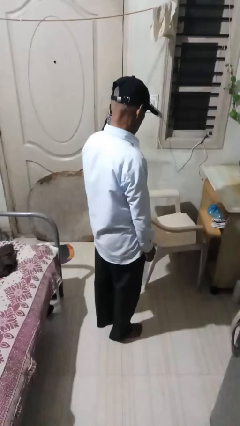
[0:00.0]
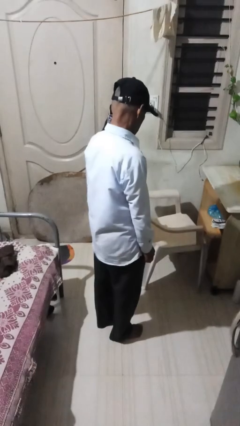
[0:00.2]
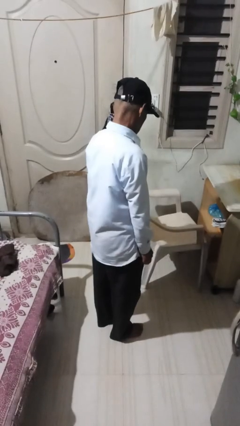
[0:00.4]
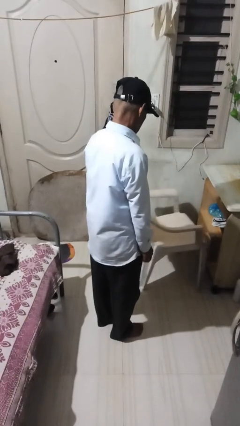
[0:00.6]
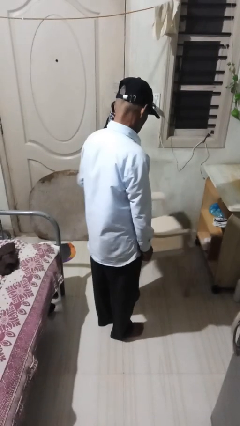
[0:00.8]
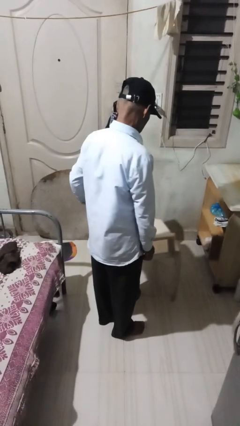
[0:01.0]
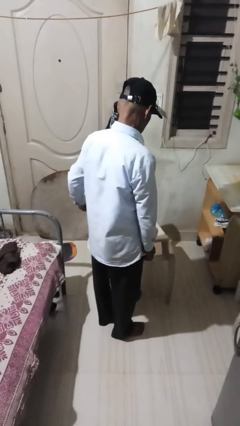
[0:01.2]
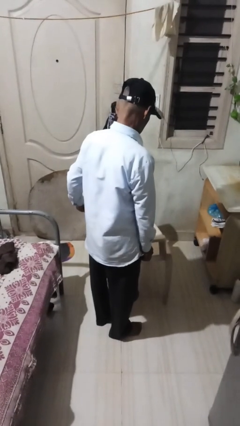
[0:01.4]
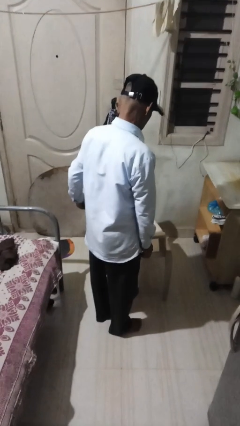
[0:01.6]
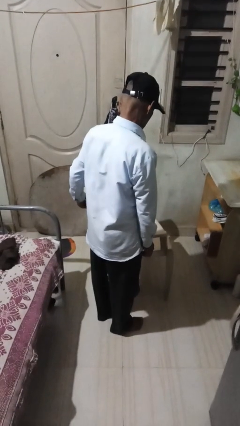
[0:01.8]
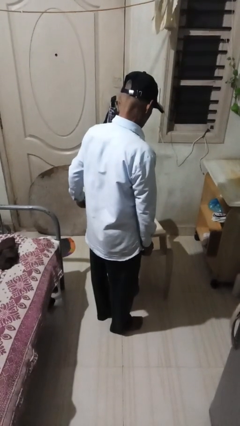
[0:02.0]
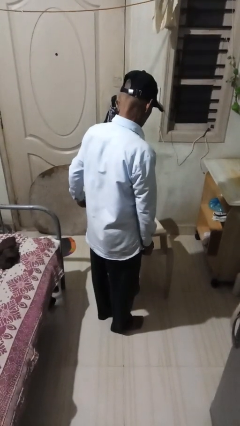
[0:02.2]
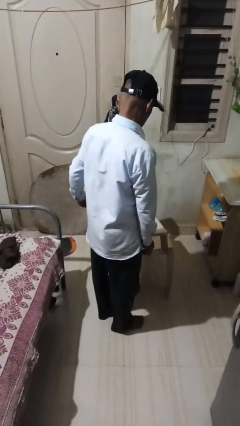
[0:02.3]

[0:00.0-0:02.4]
person pulls out chair

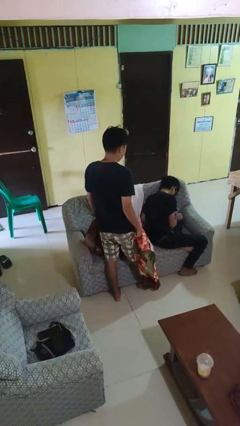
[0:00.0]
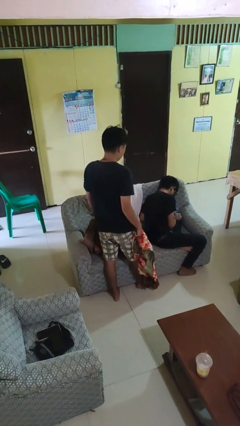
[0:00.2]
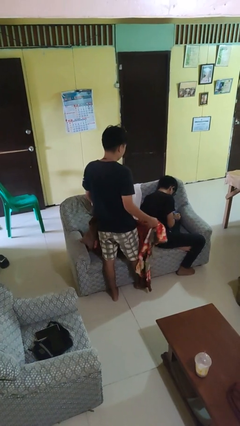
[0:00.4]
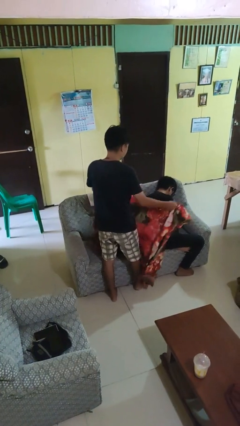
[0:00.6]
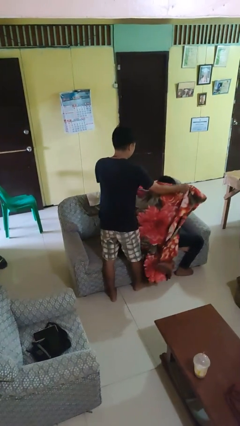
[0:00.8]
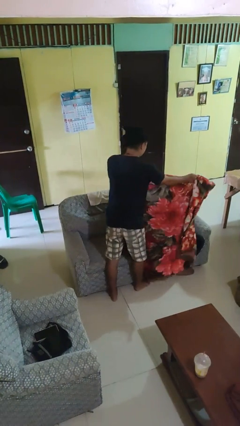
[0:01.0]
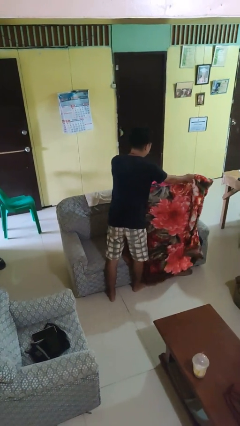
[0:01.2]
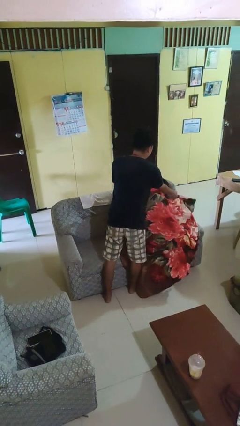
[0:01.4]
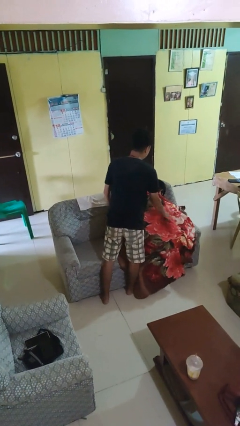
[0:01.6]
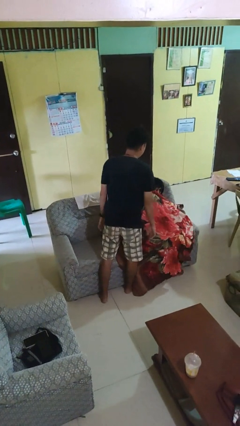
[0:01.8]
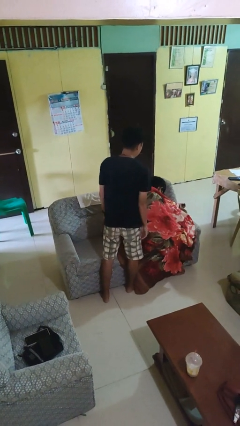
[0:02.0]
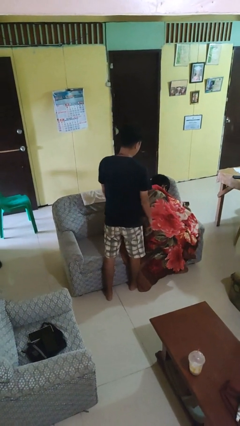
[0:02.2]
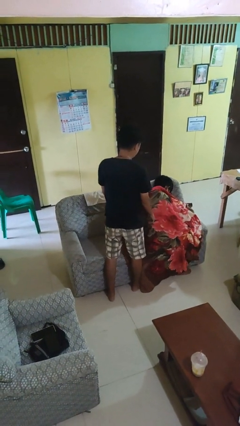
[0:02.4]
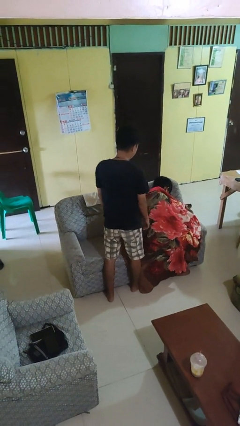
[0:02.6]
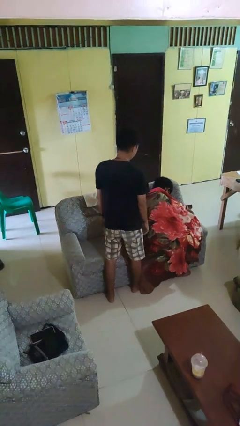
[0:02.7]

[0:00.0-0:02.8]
person covers friend with blanket

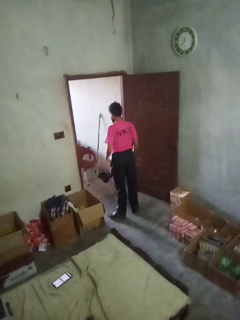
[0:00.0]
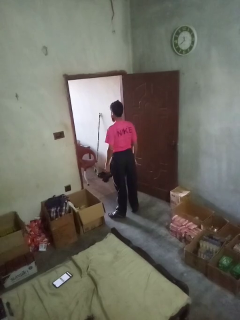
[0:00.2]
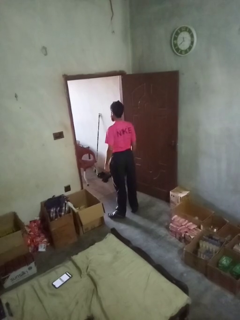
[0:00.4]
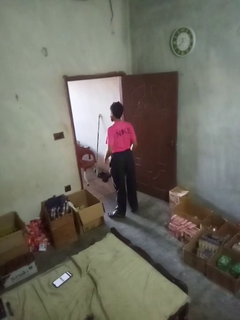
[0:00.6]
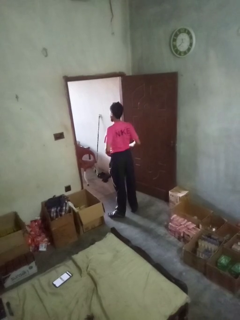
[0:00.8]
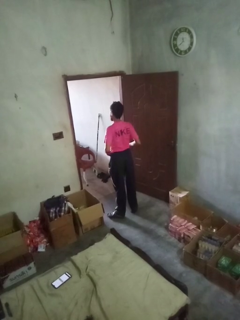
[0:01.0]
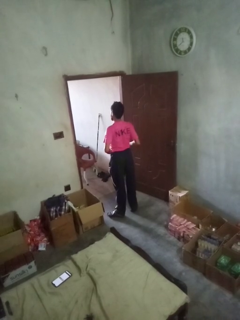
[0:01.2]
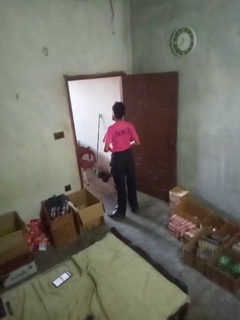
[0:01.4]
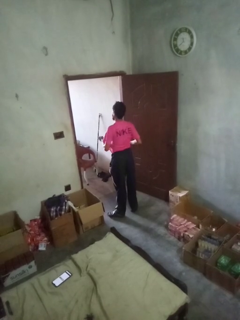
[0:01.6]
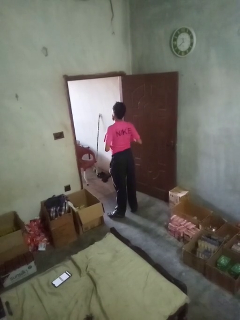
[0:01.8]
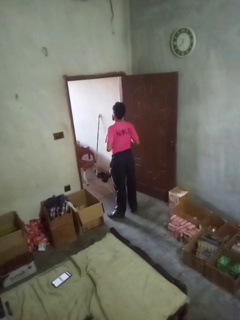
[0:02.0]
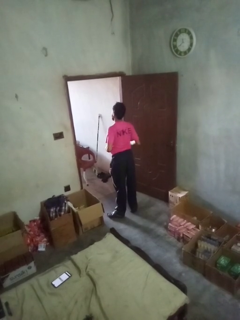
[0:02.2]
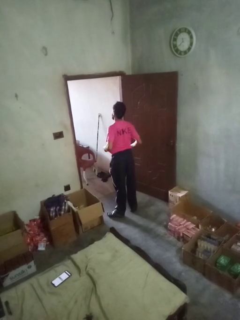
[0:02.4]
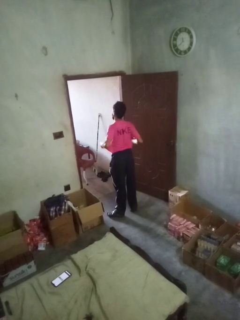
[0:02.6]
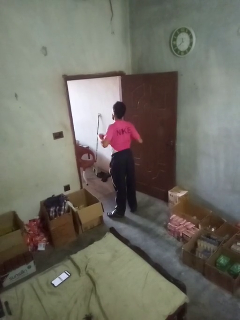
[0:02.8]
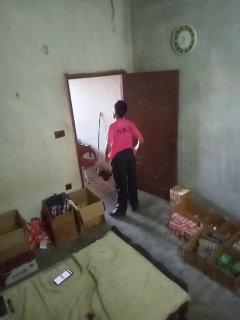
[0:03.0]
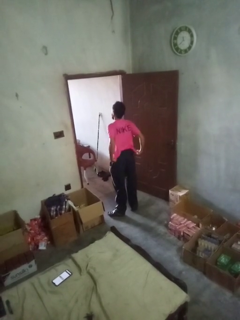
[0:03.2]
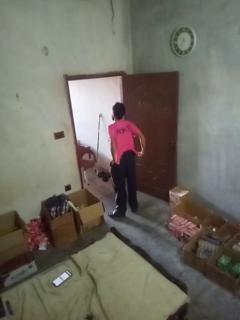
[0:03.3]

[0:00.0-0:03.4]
person untucks shirt

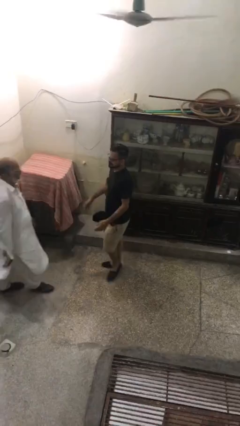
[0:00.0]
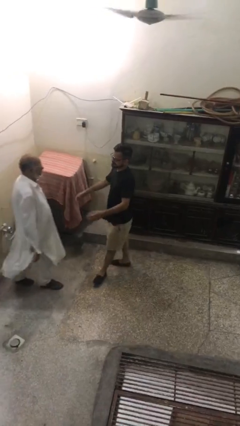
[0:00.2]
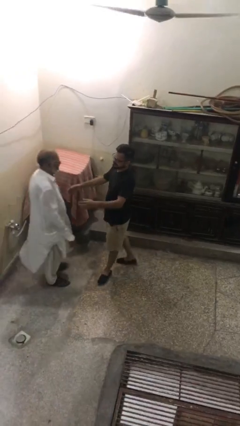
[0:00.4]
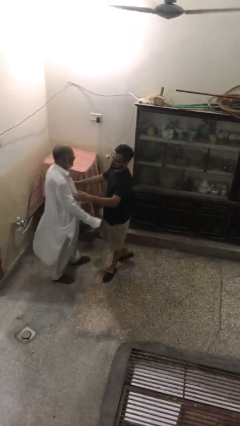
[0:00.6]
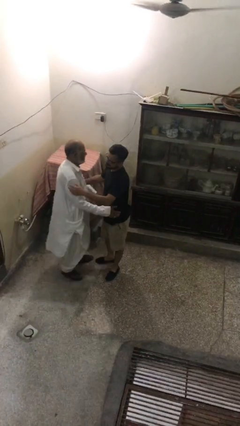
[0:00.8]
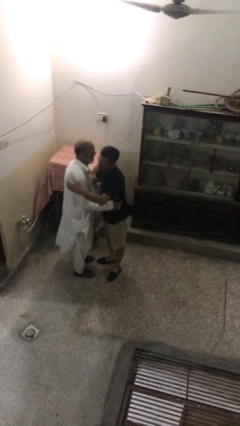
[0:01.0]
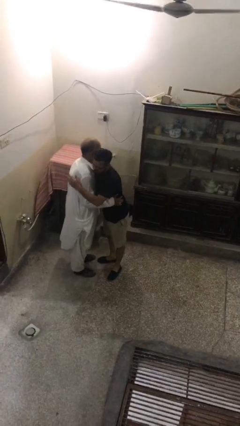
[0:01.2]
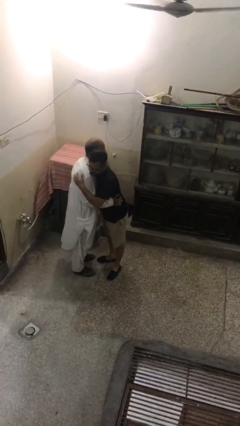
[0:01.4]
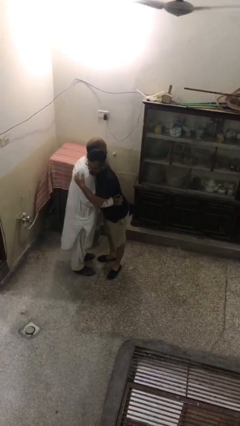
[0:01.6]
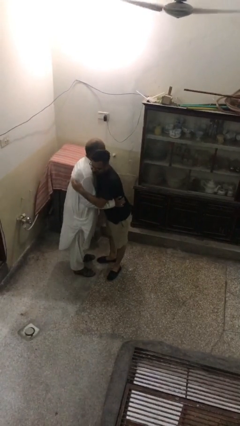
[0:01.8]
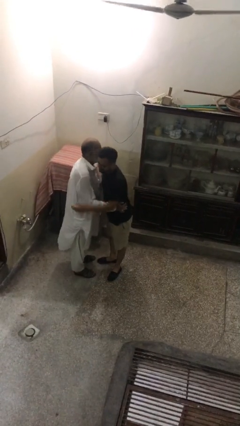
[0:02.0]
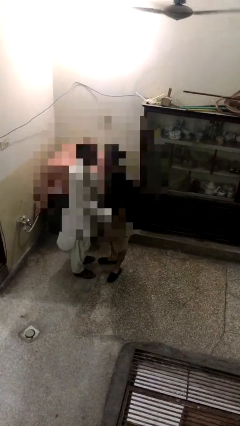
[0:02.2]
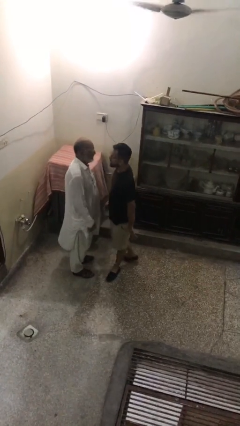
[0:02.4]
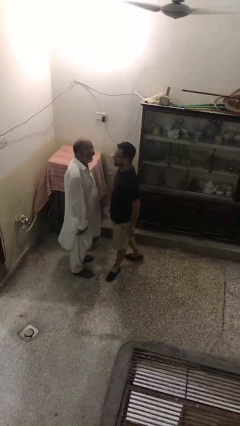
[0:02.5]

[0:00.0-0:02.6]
person embraces person

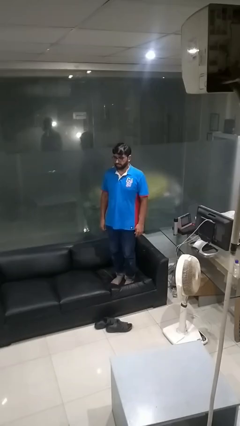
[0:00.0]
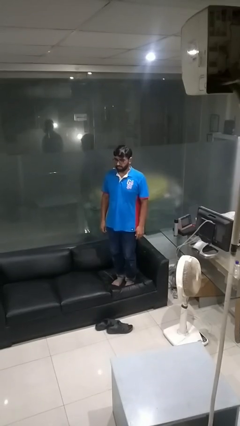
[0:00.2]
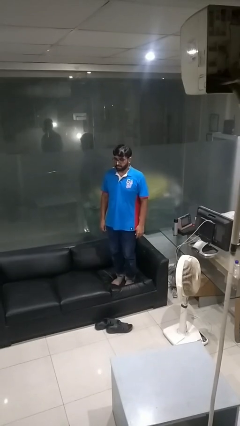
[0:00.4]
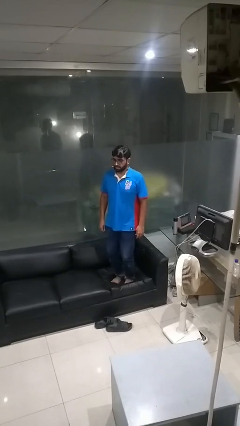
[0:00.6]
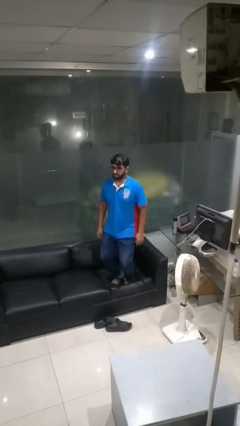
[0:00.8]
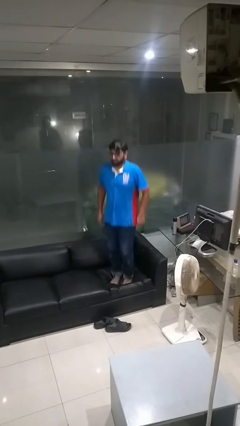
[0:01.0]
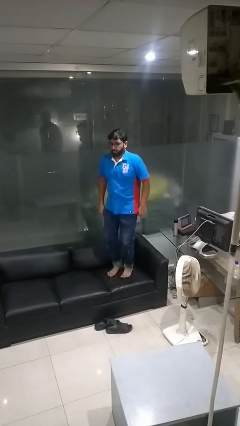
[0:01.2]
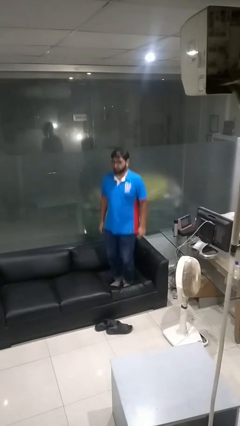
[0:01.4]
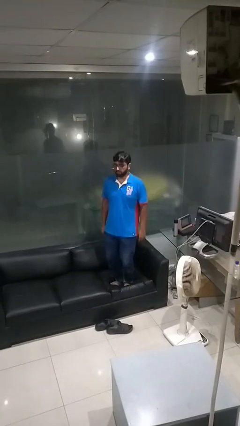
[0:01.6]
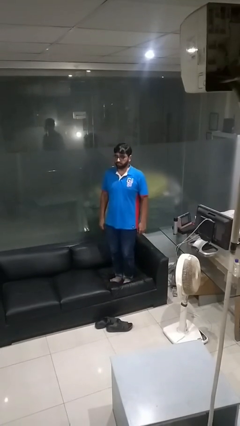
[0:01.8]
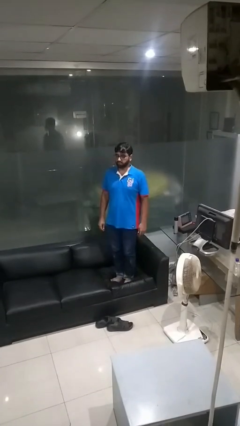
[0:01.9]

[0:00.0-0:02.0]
person jumps on couch

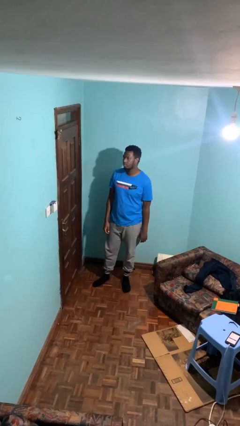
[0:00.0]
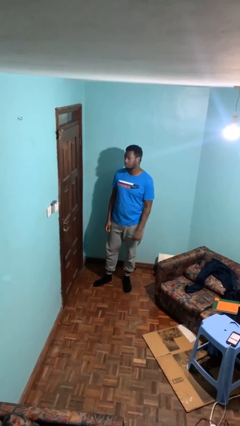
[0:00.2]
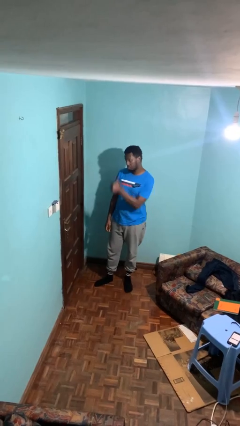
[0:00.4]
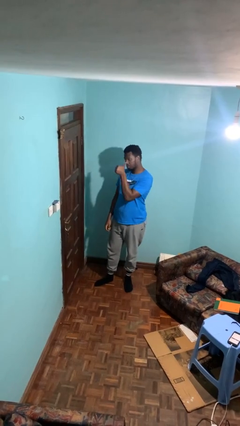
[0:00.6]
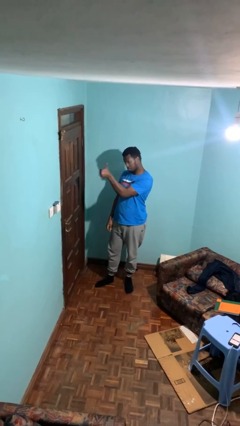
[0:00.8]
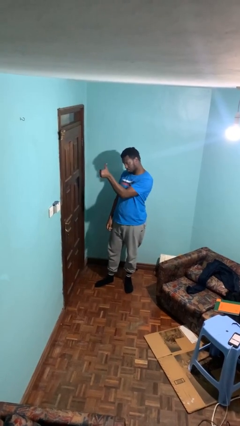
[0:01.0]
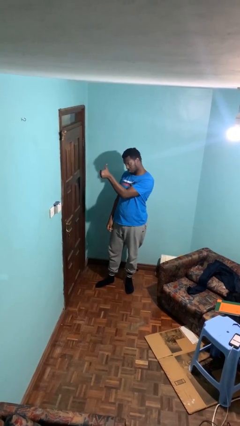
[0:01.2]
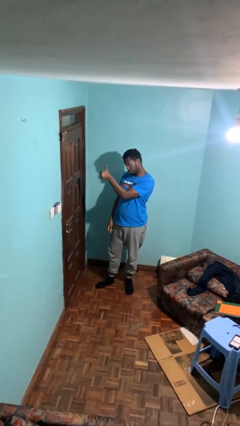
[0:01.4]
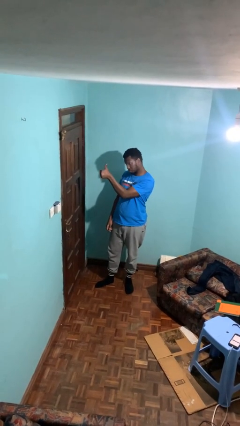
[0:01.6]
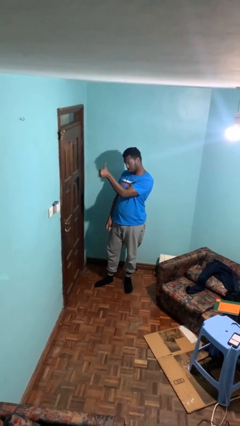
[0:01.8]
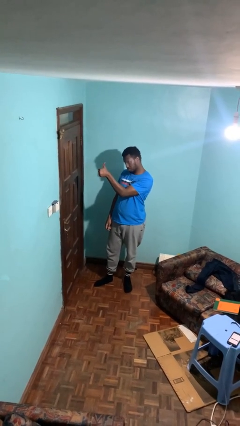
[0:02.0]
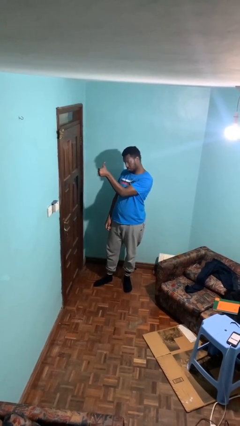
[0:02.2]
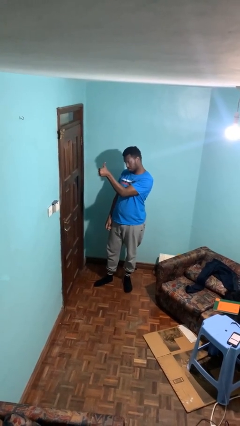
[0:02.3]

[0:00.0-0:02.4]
person gestures thumbs up

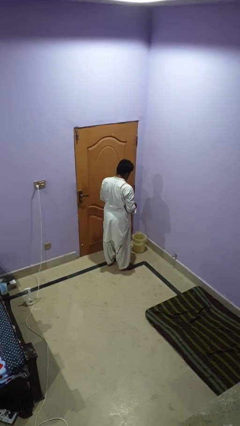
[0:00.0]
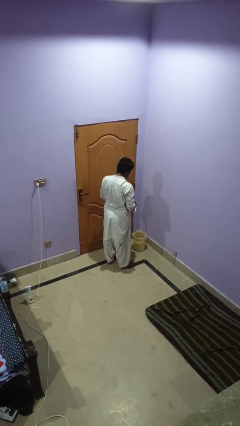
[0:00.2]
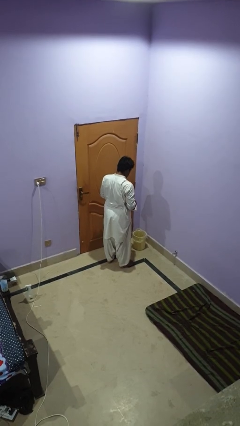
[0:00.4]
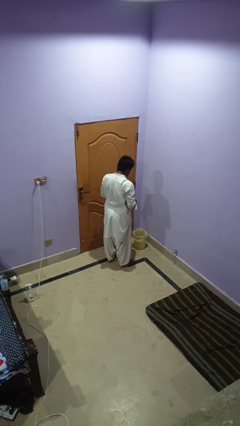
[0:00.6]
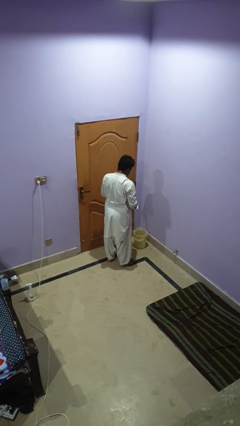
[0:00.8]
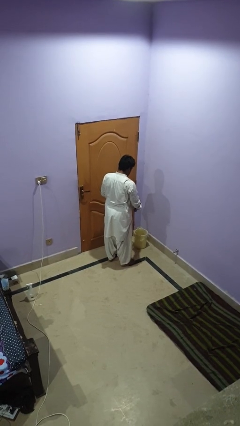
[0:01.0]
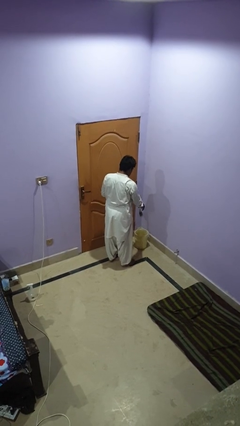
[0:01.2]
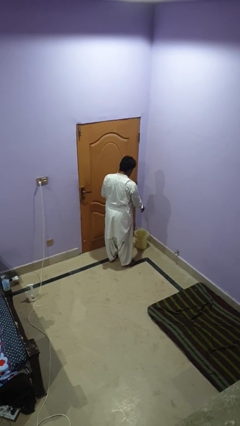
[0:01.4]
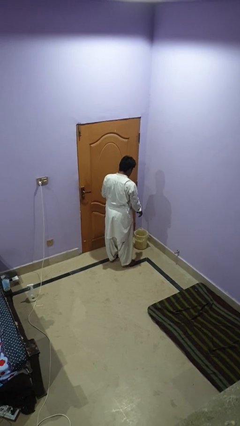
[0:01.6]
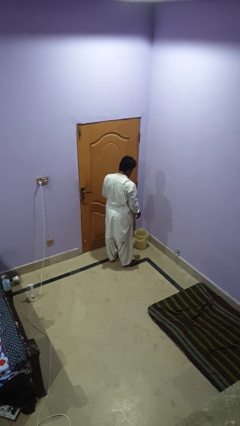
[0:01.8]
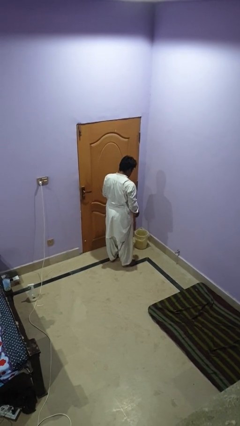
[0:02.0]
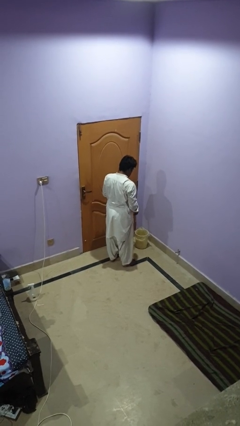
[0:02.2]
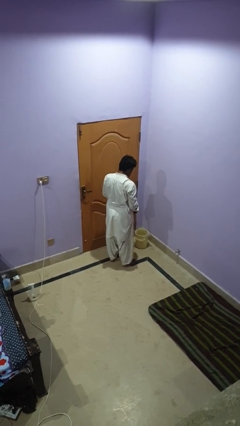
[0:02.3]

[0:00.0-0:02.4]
person discards trash
